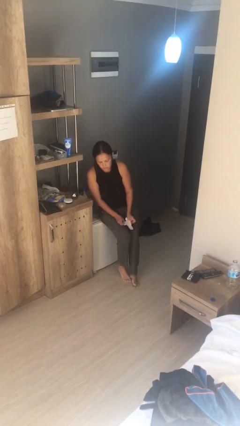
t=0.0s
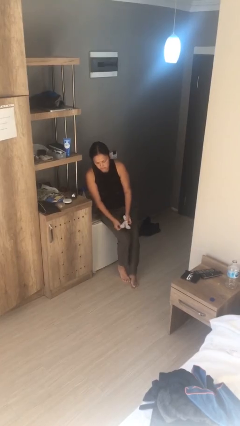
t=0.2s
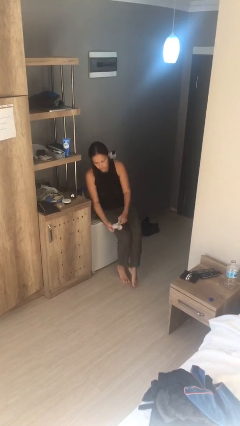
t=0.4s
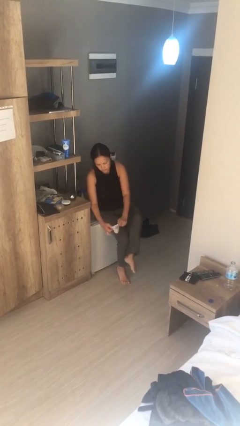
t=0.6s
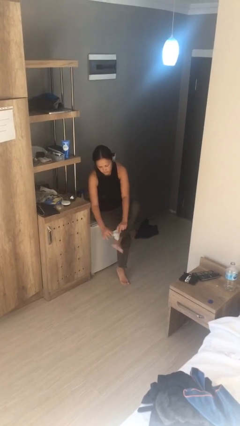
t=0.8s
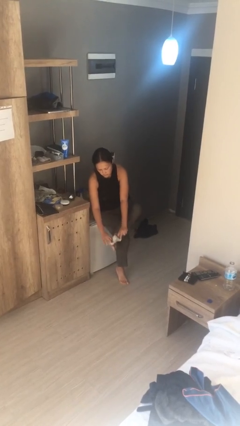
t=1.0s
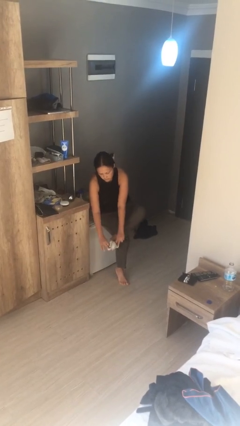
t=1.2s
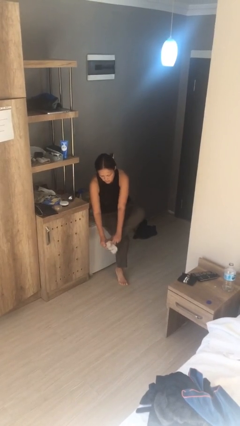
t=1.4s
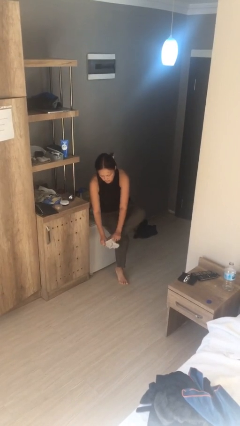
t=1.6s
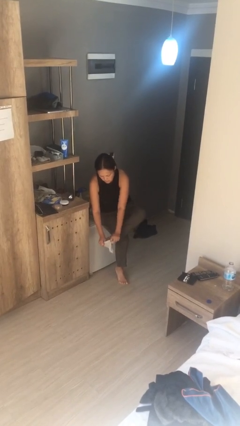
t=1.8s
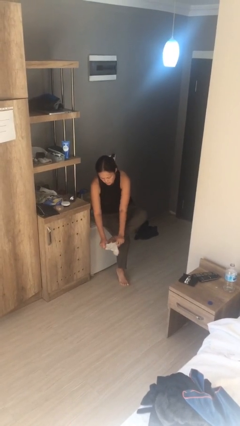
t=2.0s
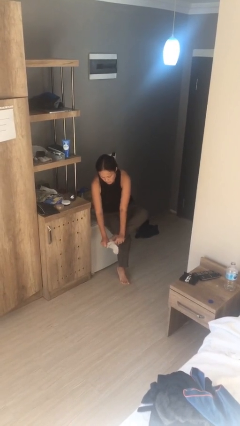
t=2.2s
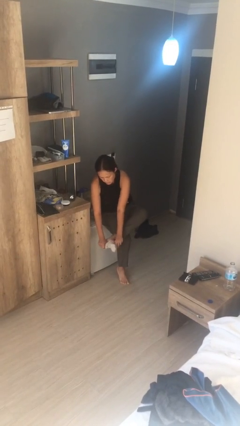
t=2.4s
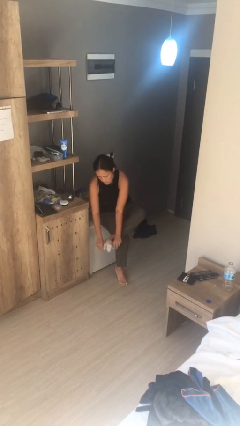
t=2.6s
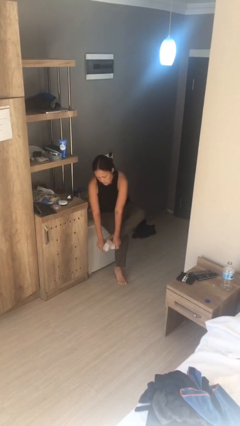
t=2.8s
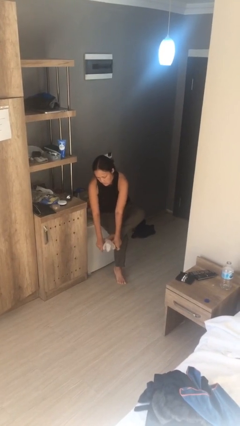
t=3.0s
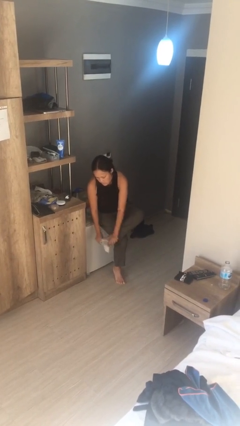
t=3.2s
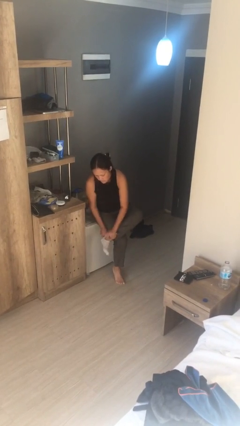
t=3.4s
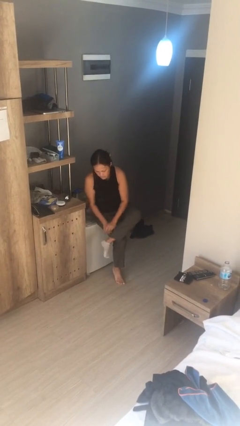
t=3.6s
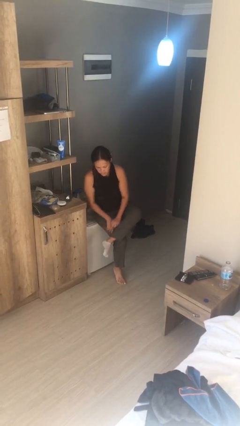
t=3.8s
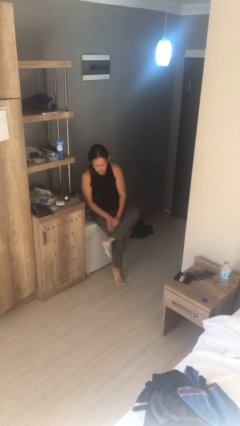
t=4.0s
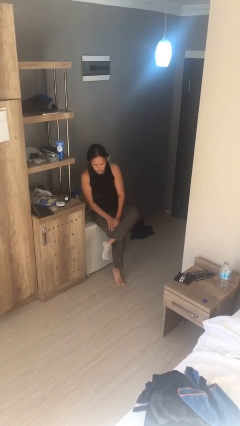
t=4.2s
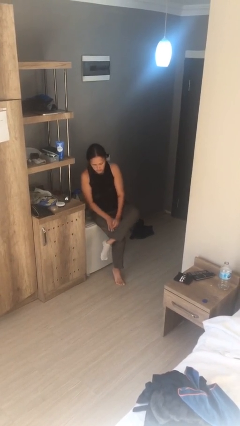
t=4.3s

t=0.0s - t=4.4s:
person puts on socks

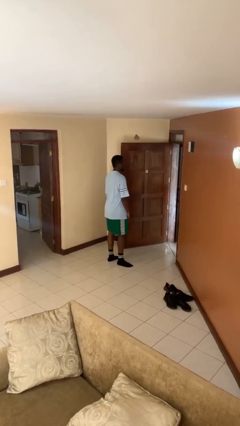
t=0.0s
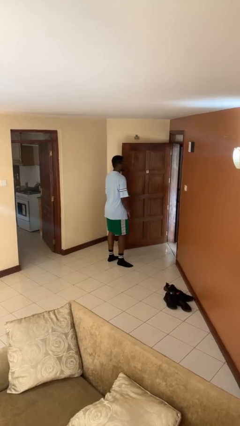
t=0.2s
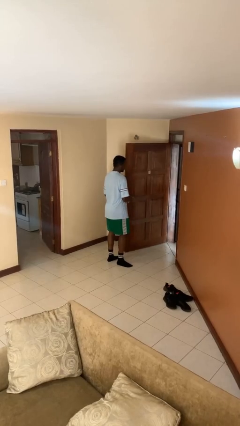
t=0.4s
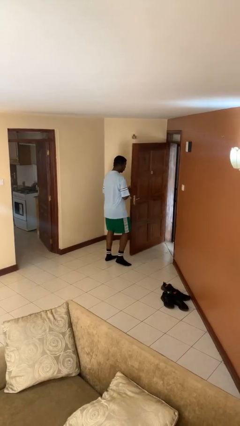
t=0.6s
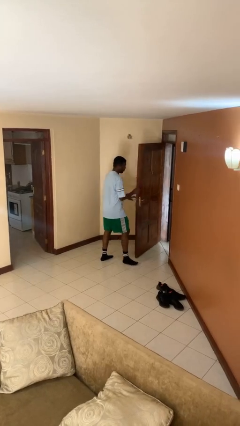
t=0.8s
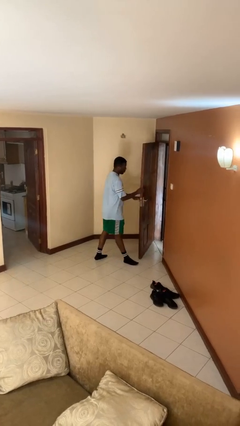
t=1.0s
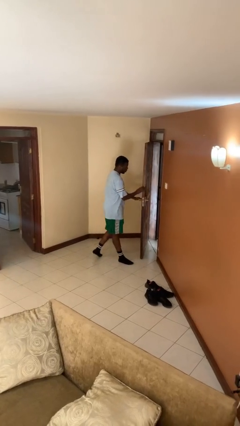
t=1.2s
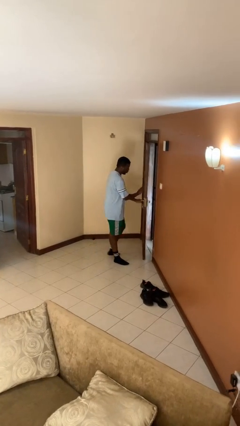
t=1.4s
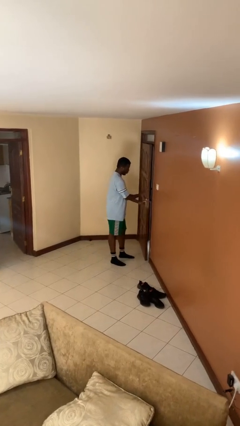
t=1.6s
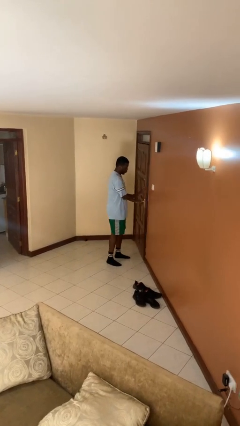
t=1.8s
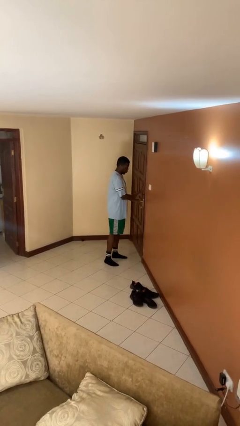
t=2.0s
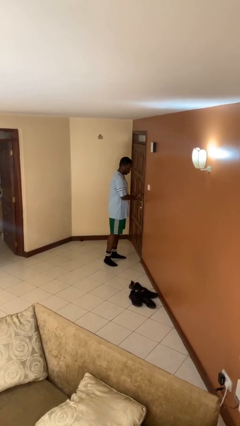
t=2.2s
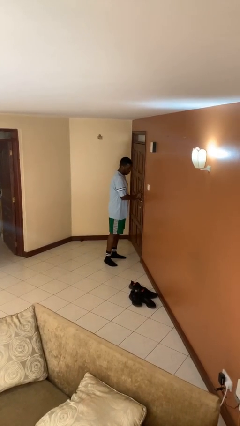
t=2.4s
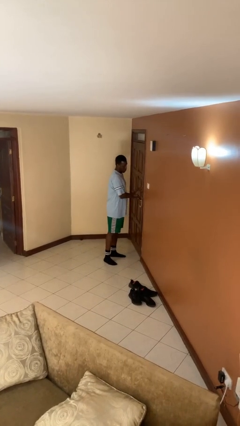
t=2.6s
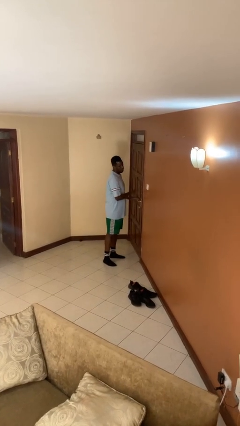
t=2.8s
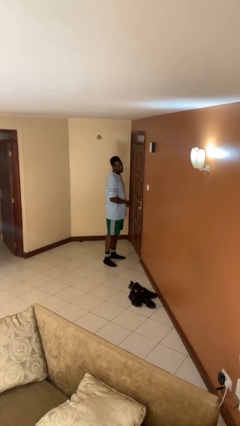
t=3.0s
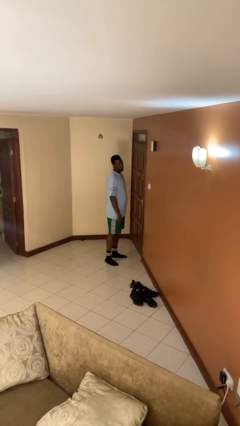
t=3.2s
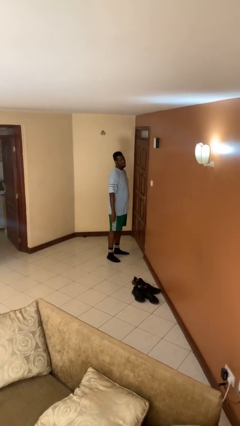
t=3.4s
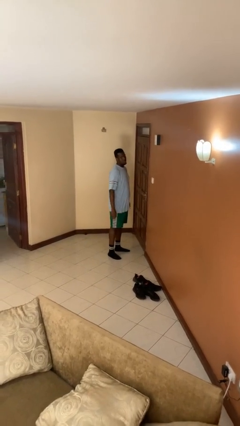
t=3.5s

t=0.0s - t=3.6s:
person closes facility door

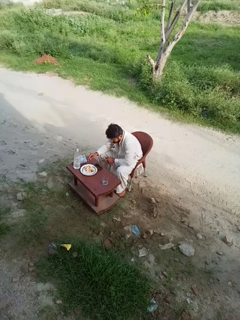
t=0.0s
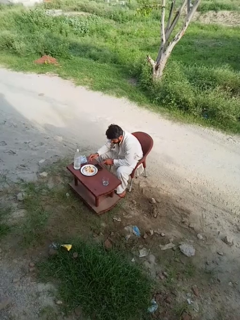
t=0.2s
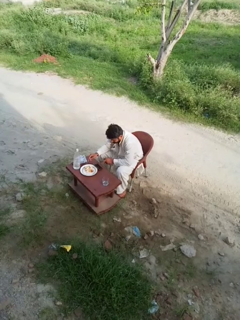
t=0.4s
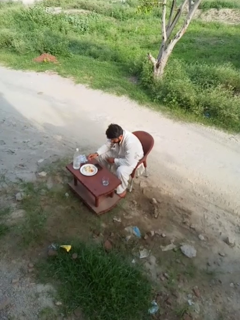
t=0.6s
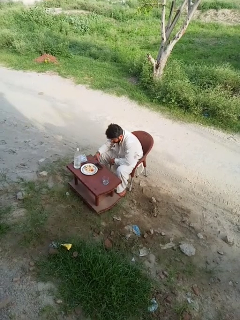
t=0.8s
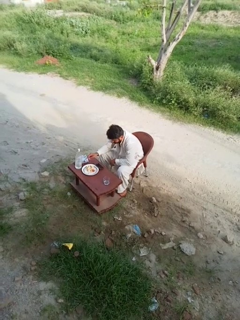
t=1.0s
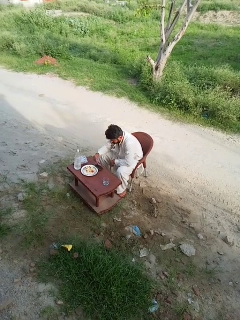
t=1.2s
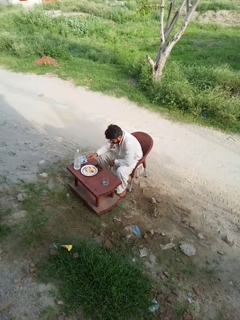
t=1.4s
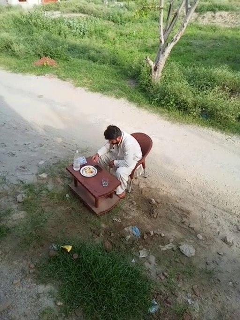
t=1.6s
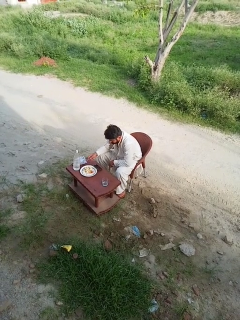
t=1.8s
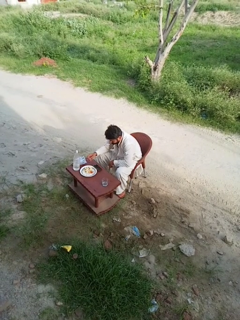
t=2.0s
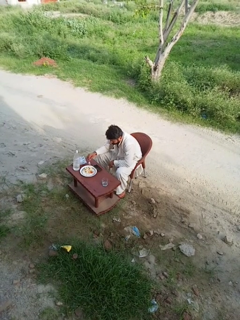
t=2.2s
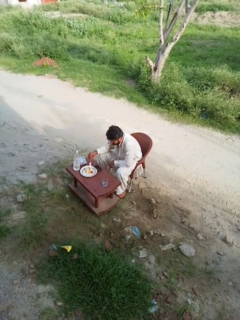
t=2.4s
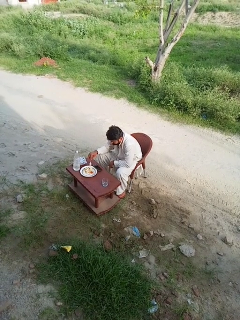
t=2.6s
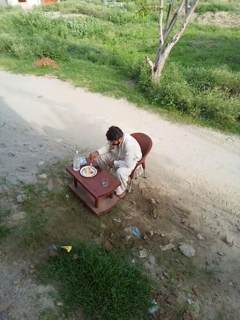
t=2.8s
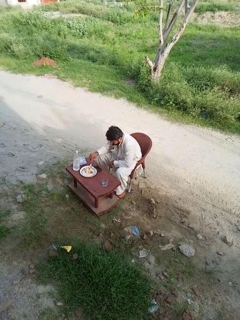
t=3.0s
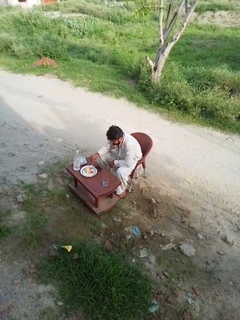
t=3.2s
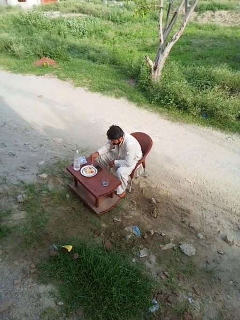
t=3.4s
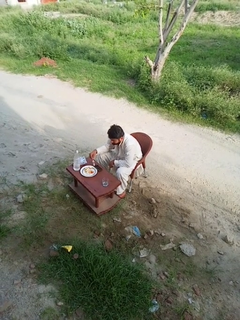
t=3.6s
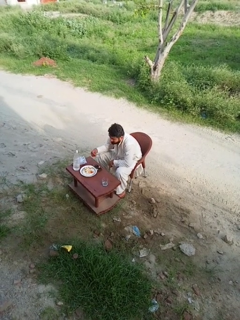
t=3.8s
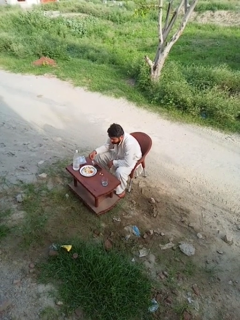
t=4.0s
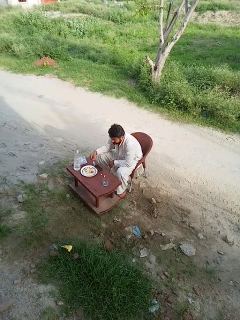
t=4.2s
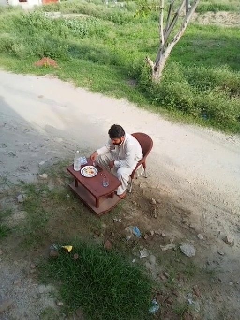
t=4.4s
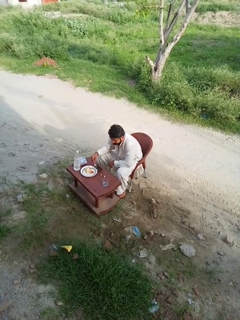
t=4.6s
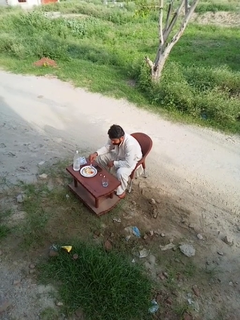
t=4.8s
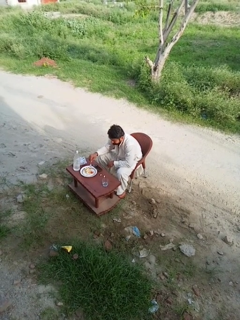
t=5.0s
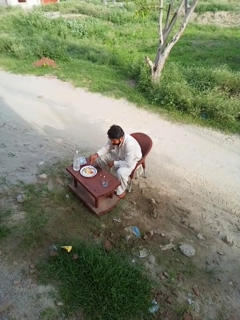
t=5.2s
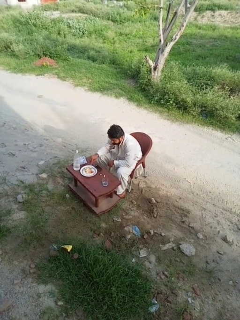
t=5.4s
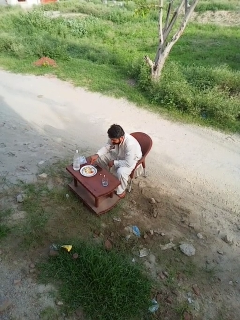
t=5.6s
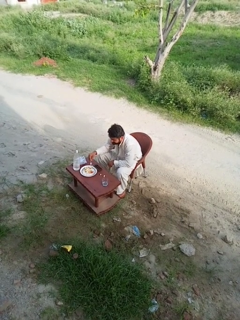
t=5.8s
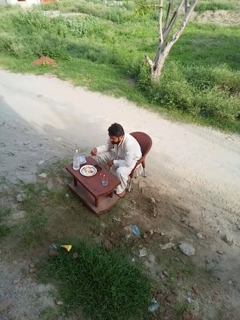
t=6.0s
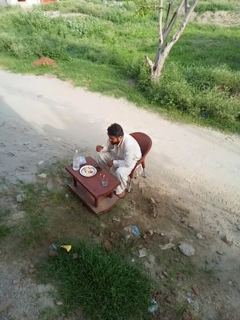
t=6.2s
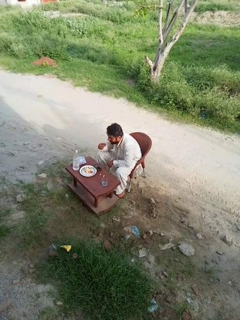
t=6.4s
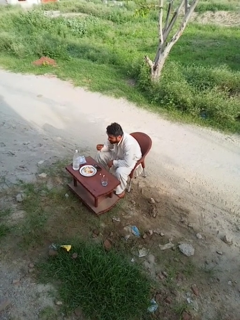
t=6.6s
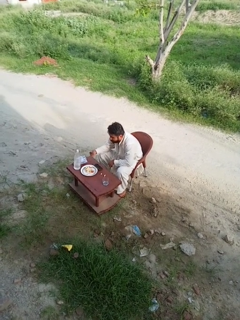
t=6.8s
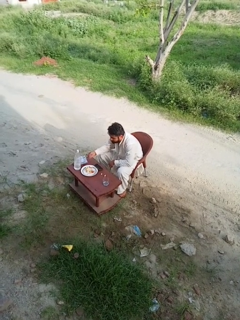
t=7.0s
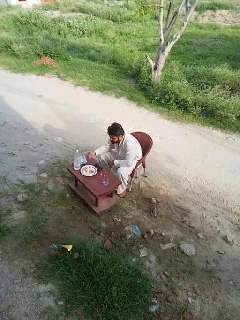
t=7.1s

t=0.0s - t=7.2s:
person eats with utensil

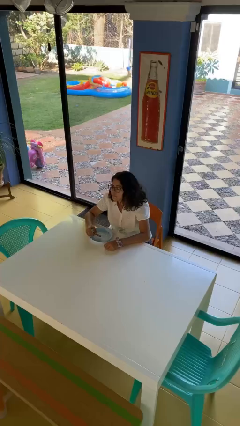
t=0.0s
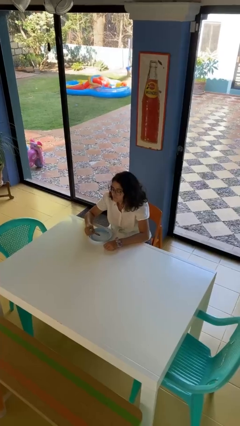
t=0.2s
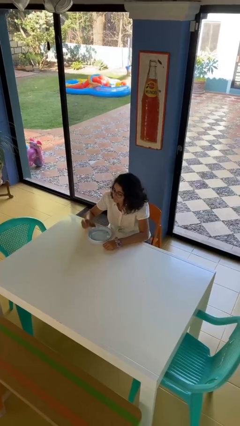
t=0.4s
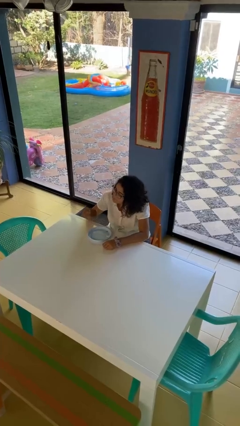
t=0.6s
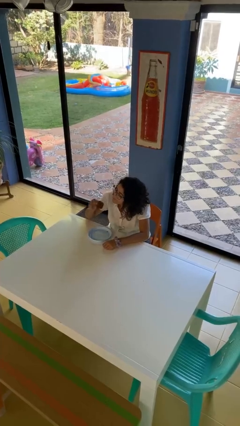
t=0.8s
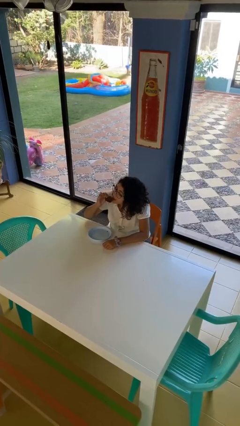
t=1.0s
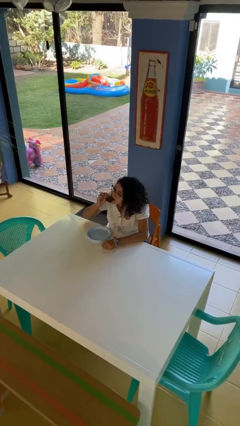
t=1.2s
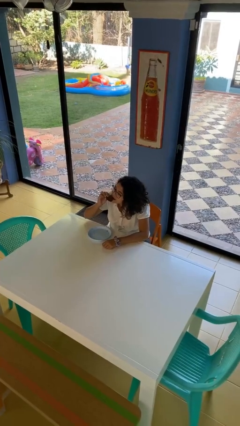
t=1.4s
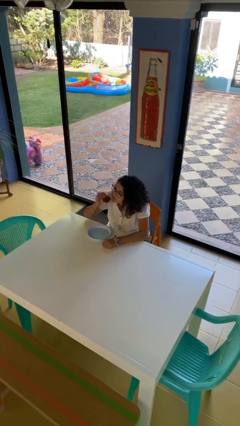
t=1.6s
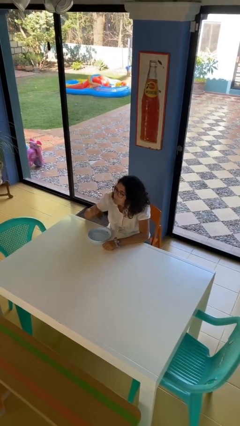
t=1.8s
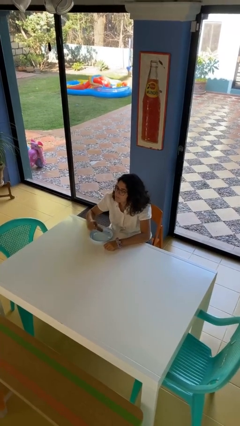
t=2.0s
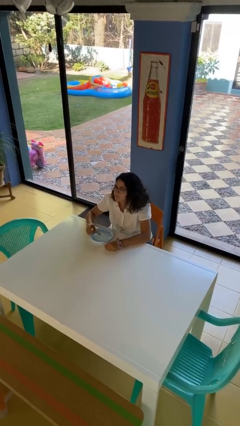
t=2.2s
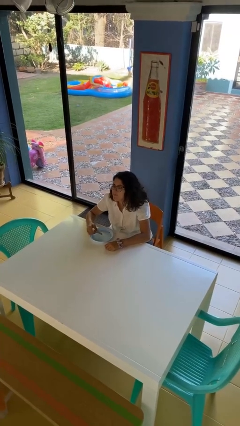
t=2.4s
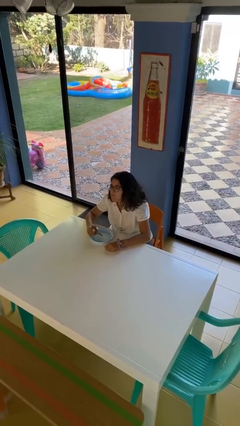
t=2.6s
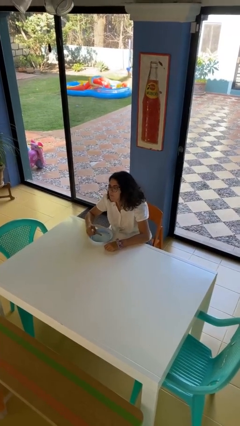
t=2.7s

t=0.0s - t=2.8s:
person eats with hands

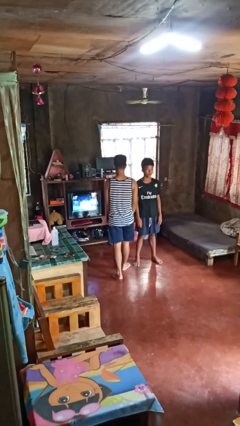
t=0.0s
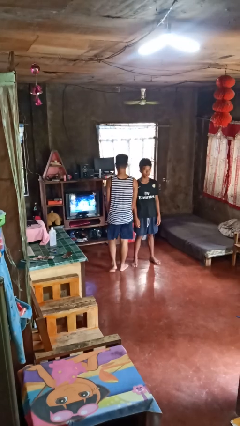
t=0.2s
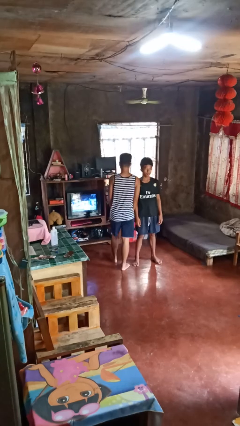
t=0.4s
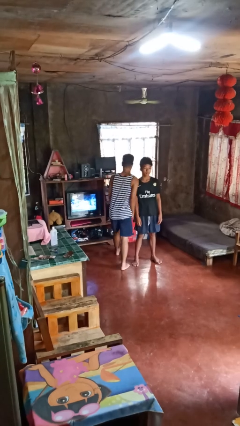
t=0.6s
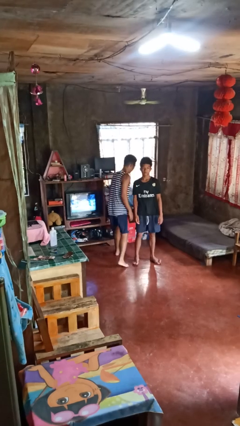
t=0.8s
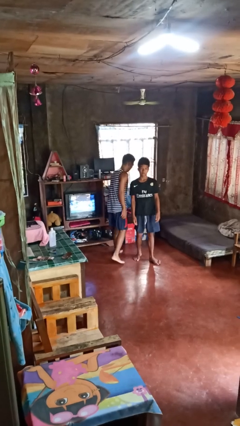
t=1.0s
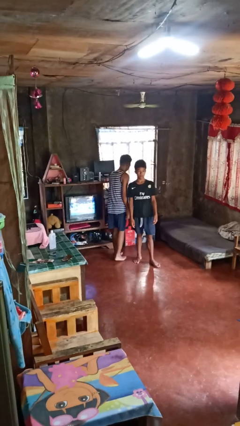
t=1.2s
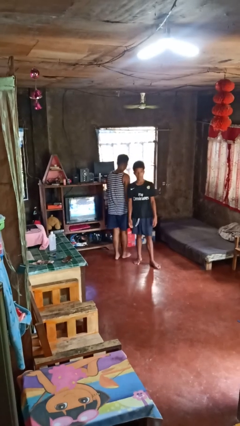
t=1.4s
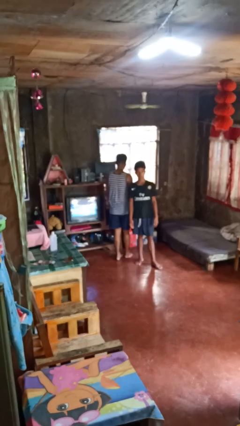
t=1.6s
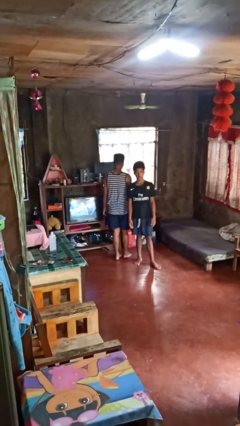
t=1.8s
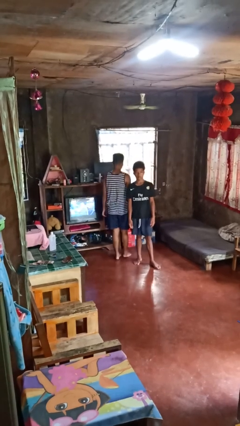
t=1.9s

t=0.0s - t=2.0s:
person bumps into person
